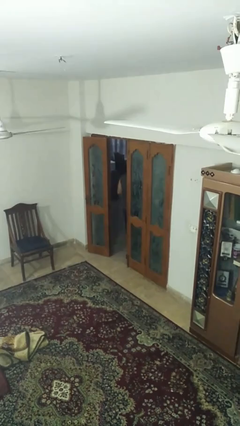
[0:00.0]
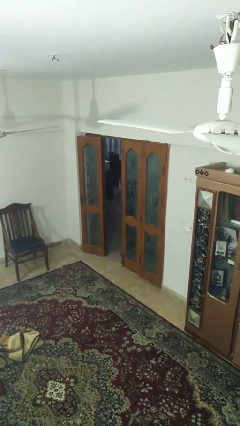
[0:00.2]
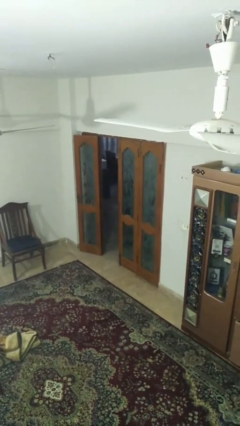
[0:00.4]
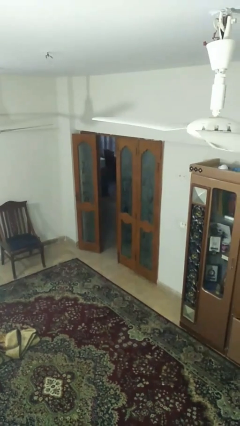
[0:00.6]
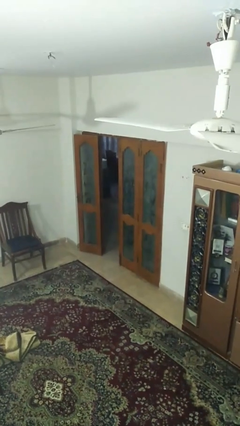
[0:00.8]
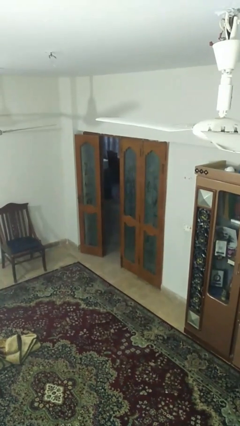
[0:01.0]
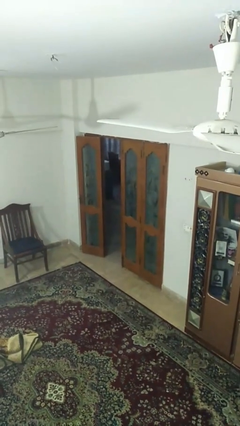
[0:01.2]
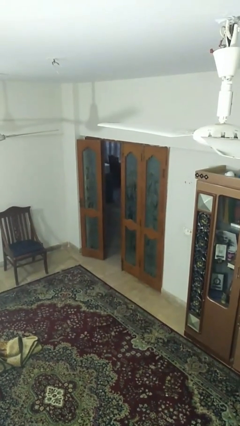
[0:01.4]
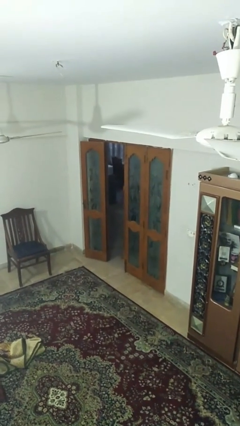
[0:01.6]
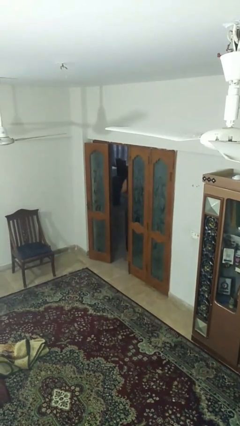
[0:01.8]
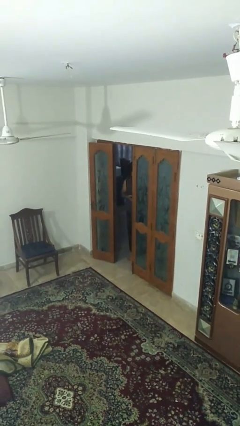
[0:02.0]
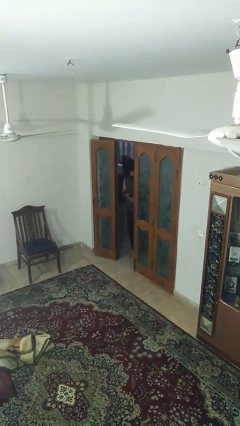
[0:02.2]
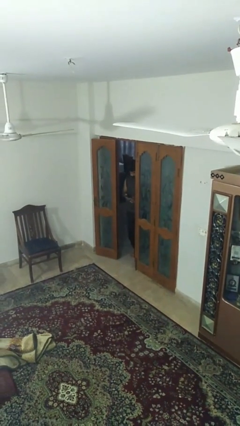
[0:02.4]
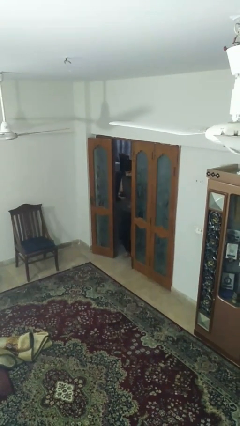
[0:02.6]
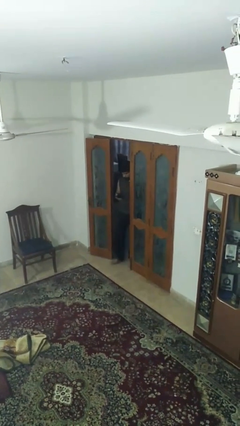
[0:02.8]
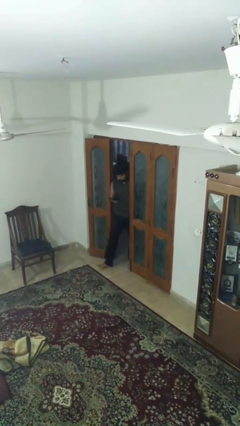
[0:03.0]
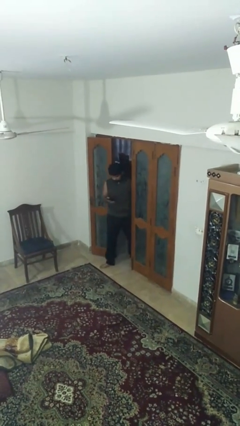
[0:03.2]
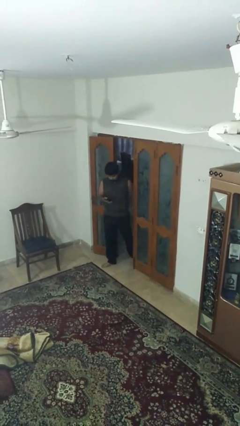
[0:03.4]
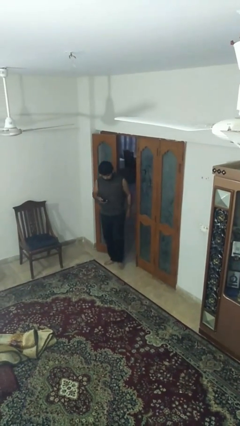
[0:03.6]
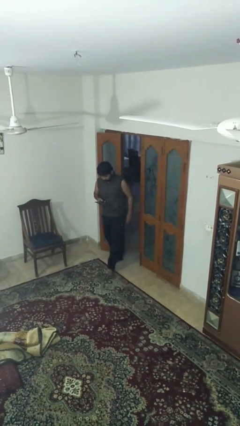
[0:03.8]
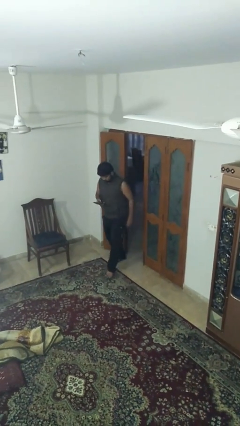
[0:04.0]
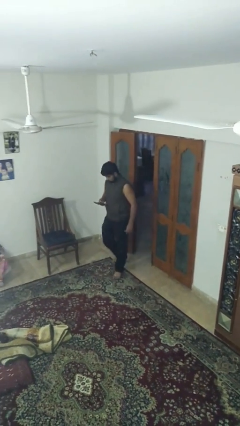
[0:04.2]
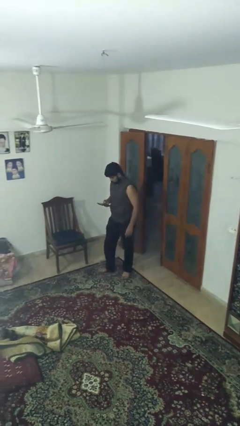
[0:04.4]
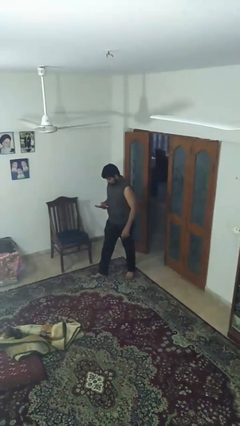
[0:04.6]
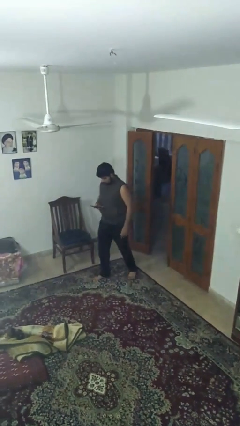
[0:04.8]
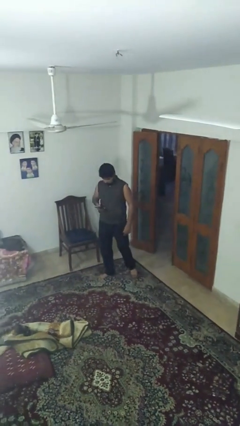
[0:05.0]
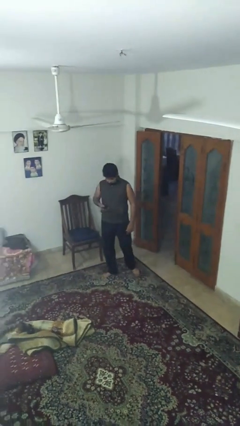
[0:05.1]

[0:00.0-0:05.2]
person enters scene through structure

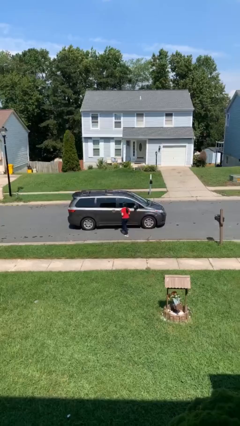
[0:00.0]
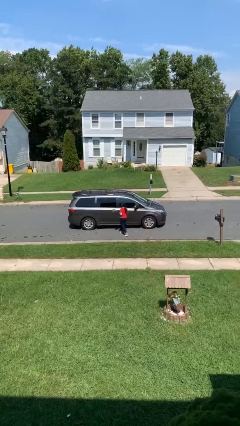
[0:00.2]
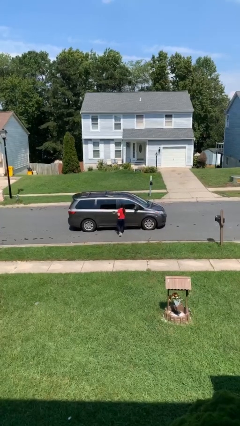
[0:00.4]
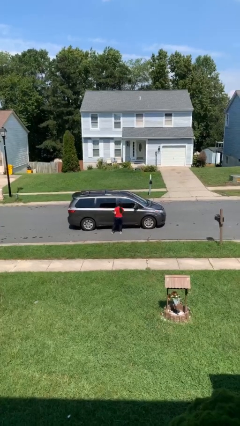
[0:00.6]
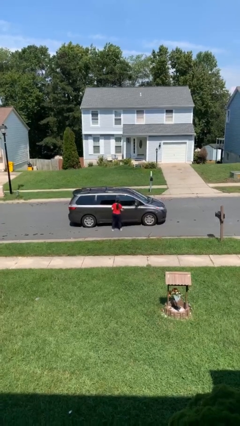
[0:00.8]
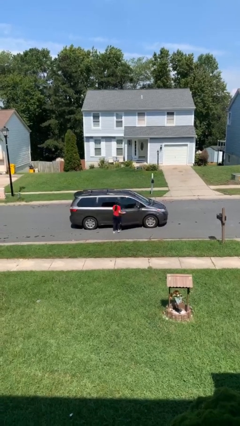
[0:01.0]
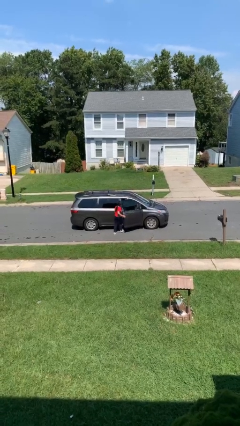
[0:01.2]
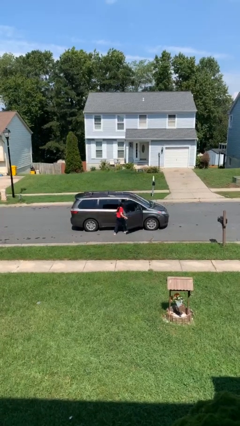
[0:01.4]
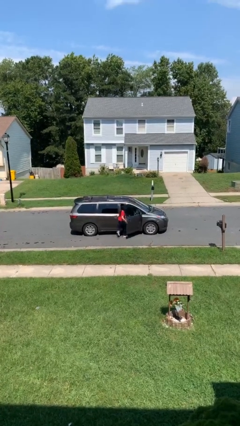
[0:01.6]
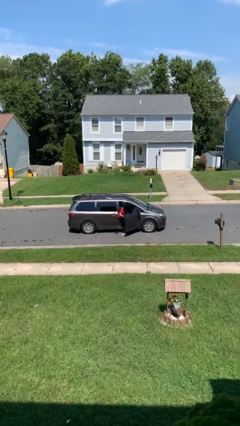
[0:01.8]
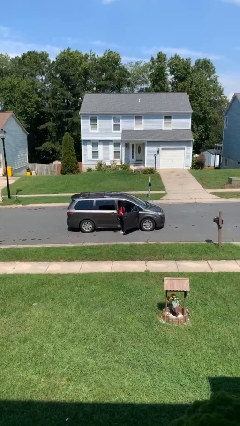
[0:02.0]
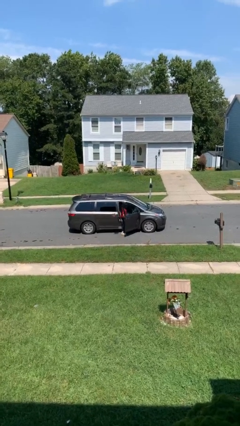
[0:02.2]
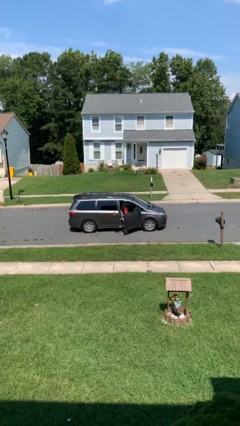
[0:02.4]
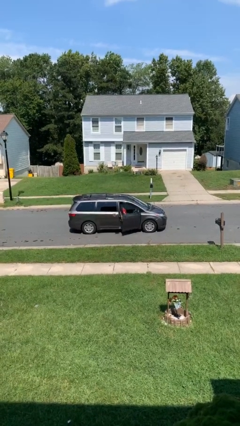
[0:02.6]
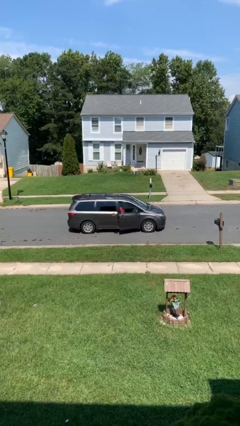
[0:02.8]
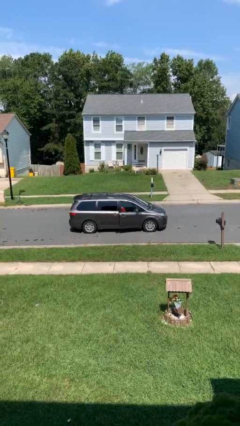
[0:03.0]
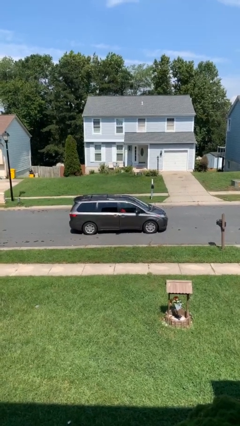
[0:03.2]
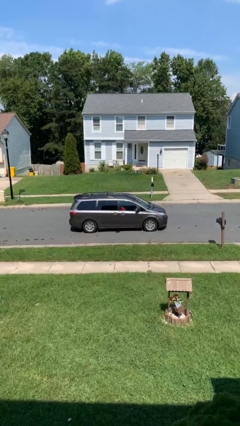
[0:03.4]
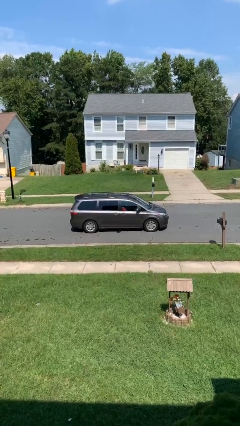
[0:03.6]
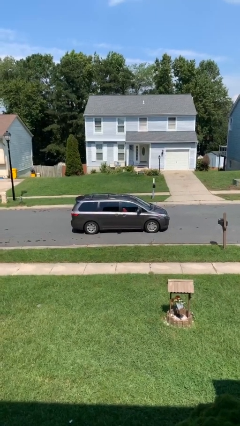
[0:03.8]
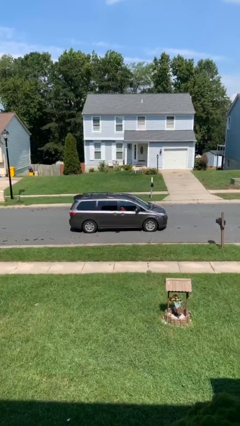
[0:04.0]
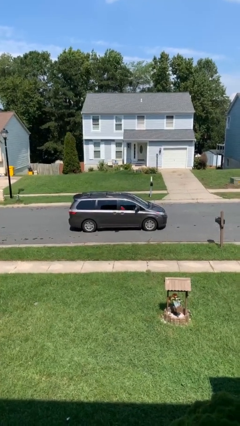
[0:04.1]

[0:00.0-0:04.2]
car picks up person

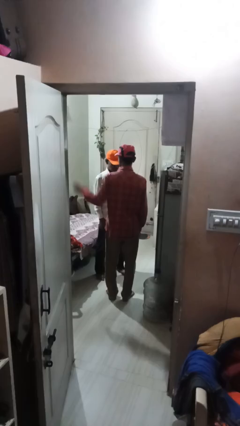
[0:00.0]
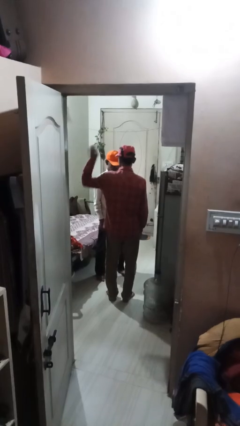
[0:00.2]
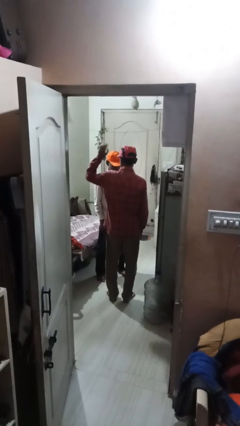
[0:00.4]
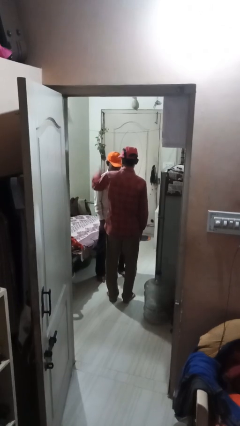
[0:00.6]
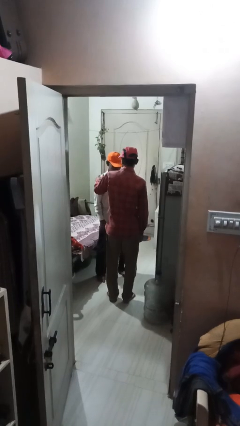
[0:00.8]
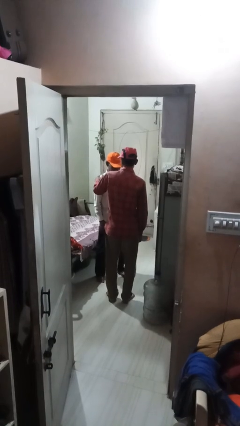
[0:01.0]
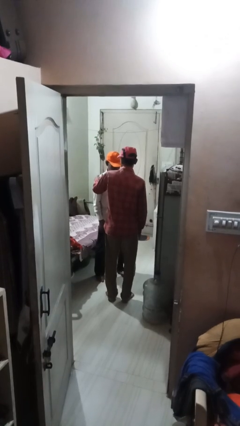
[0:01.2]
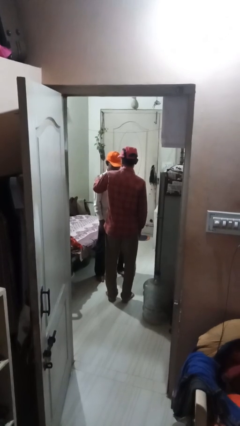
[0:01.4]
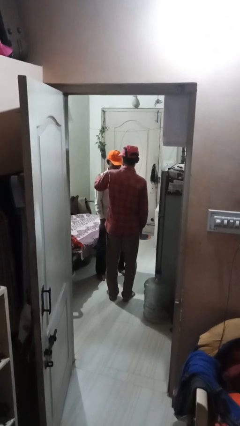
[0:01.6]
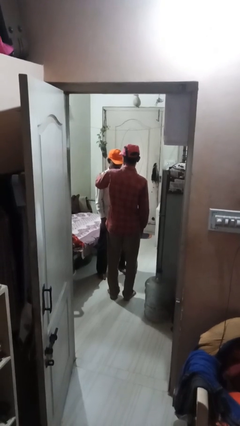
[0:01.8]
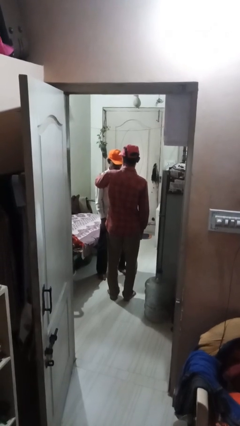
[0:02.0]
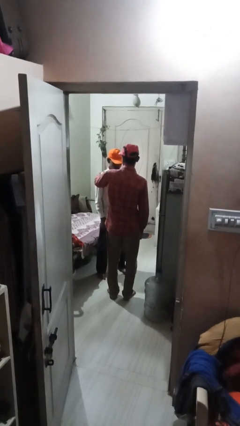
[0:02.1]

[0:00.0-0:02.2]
person pounds shoulders of person

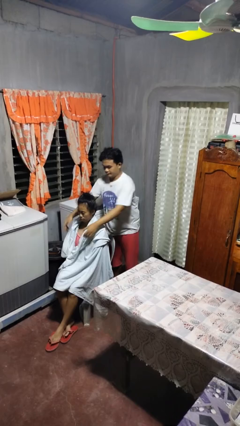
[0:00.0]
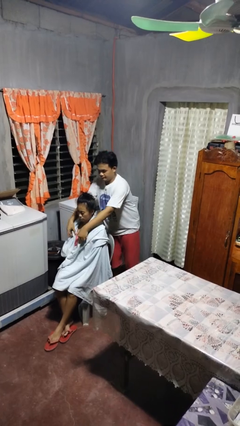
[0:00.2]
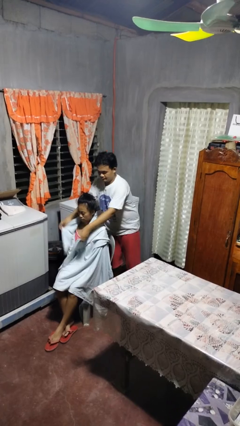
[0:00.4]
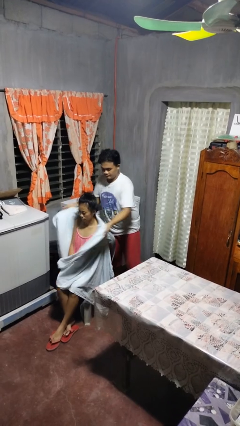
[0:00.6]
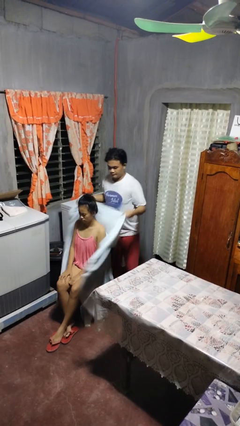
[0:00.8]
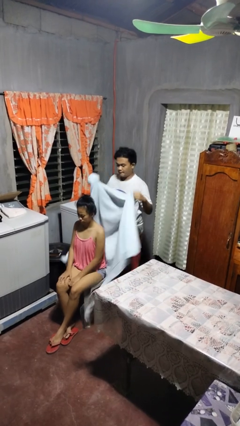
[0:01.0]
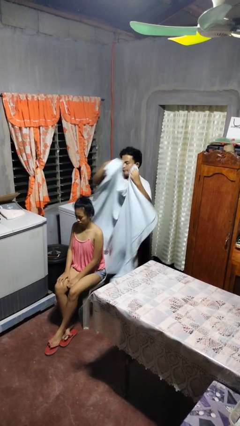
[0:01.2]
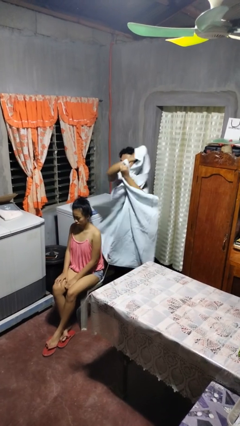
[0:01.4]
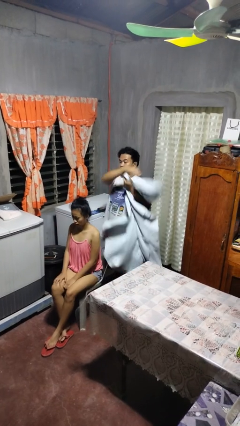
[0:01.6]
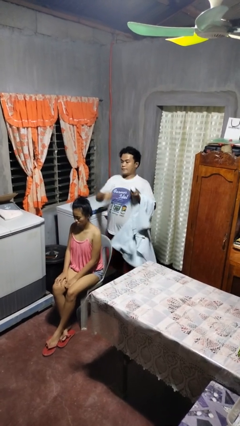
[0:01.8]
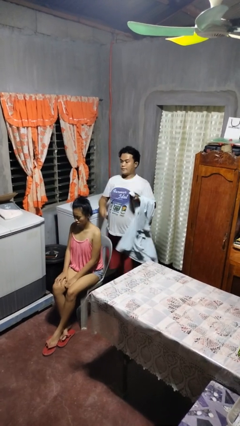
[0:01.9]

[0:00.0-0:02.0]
person uncovers friend with blanket

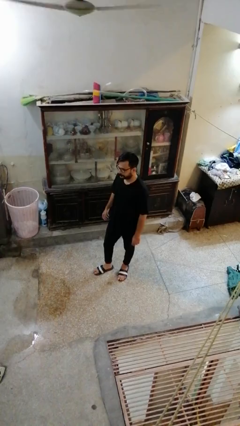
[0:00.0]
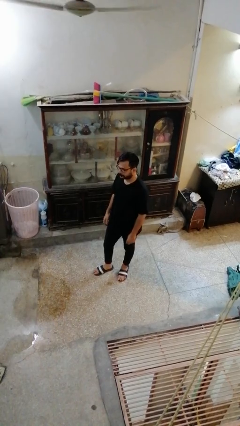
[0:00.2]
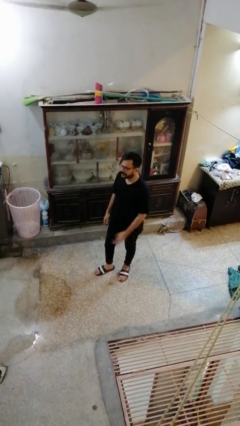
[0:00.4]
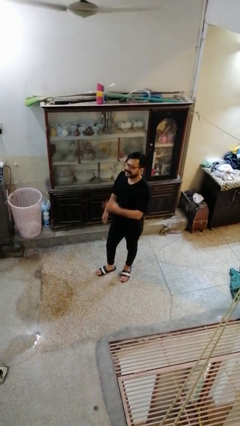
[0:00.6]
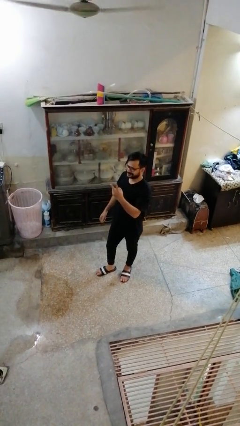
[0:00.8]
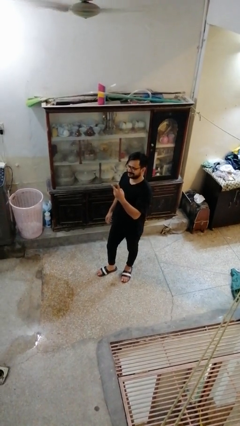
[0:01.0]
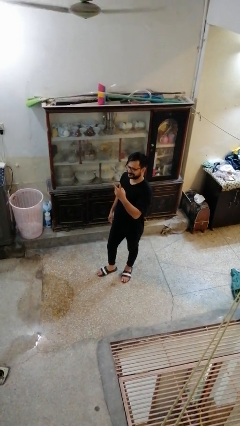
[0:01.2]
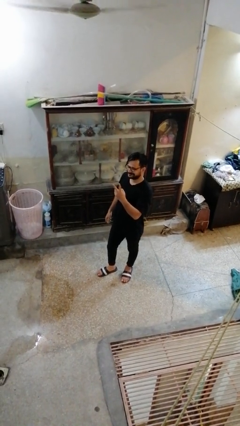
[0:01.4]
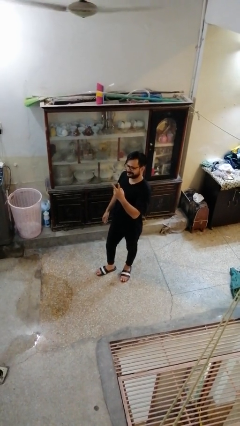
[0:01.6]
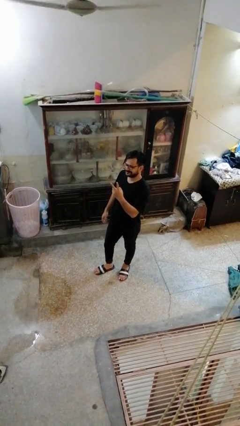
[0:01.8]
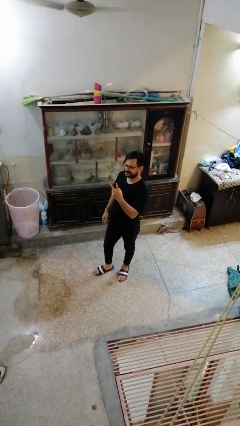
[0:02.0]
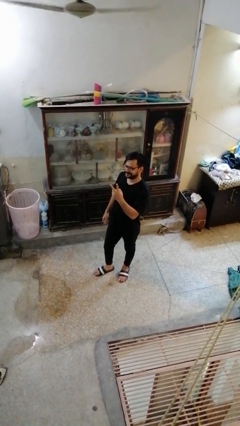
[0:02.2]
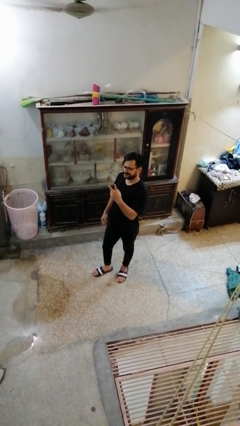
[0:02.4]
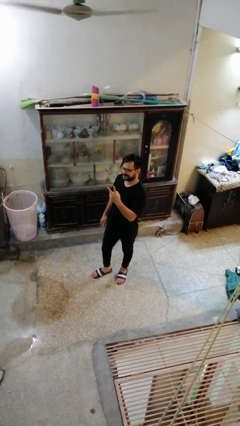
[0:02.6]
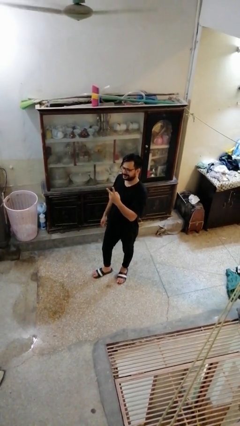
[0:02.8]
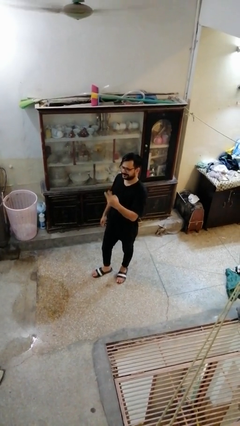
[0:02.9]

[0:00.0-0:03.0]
person gestures peace

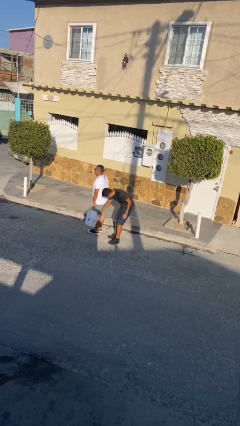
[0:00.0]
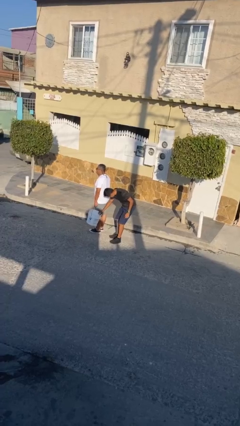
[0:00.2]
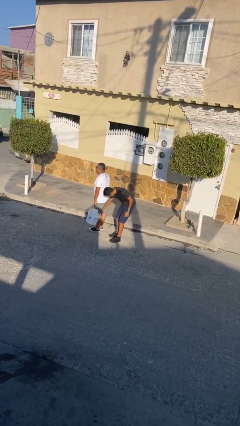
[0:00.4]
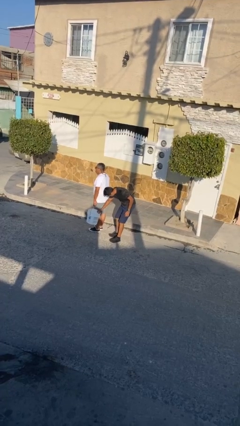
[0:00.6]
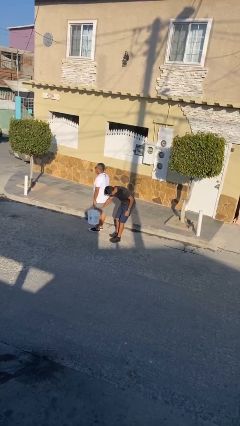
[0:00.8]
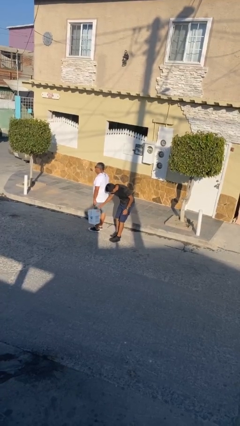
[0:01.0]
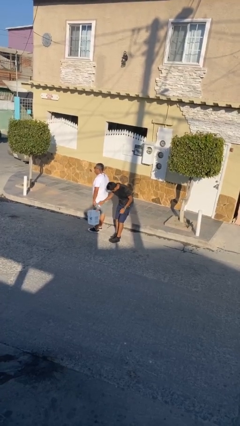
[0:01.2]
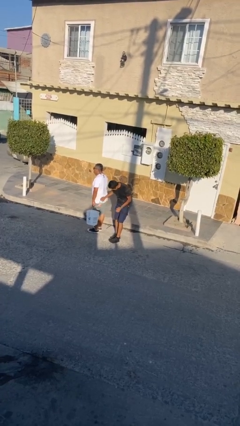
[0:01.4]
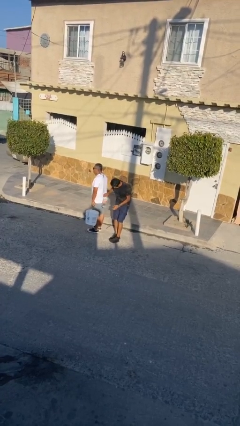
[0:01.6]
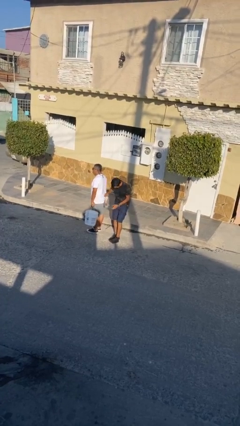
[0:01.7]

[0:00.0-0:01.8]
person steals object from person
